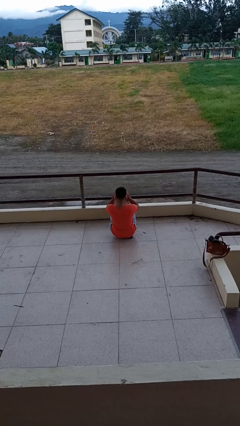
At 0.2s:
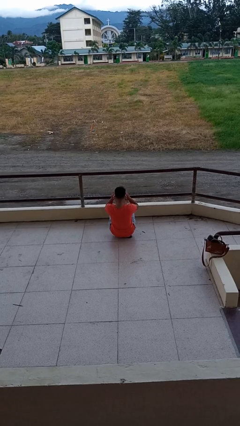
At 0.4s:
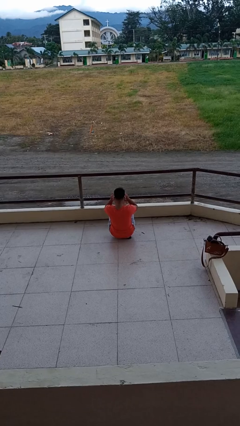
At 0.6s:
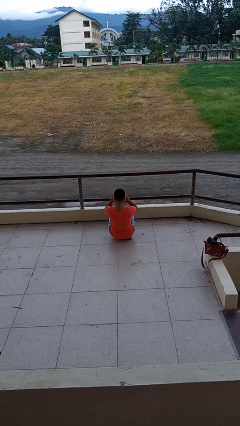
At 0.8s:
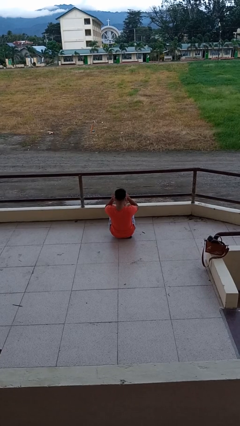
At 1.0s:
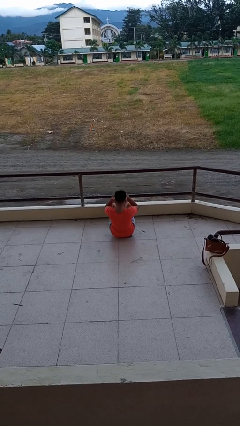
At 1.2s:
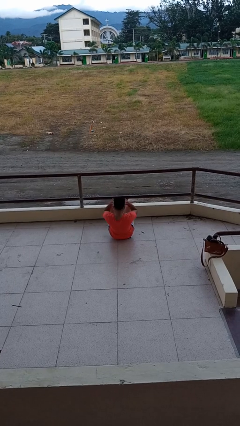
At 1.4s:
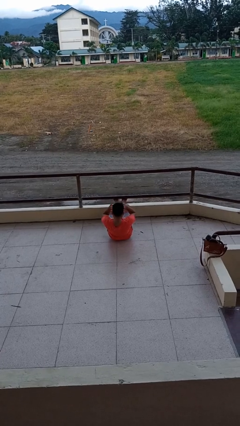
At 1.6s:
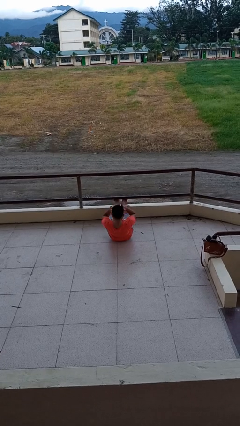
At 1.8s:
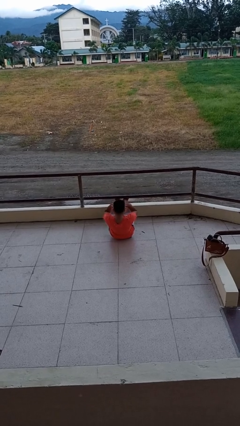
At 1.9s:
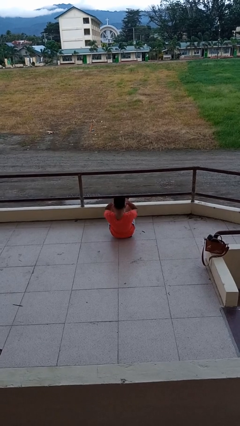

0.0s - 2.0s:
person exercises with situp

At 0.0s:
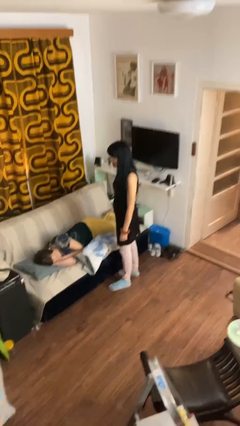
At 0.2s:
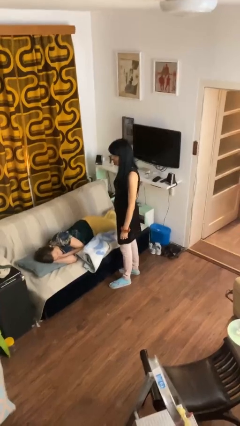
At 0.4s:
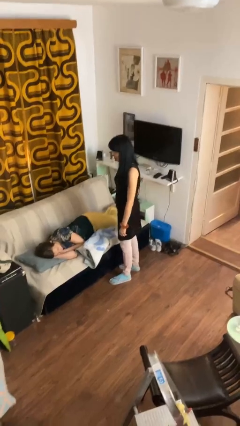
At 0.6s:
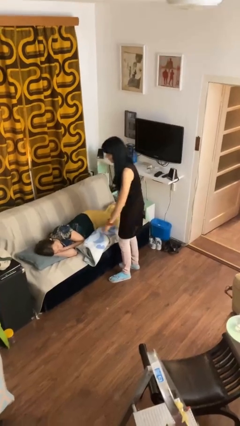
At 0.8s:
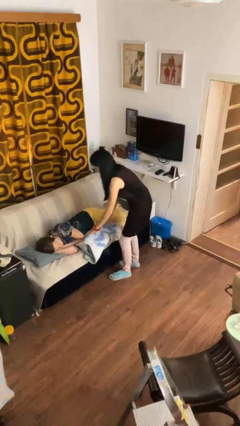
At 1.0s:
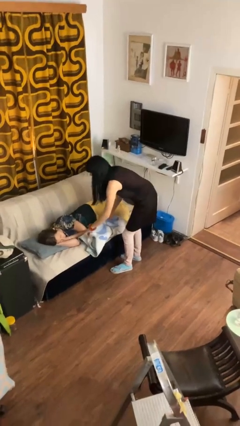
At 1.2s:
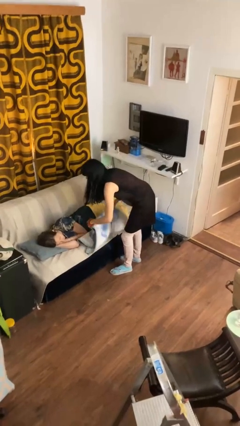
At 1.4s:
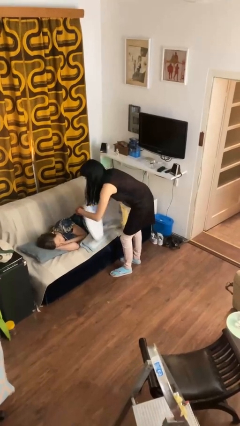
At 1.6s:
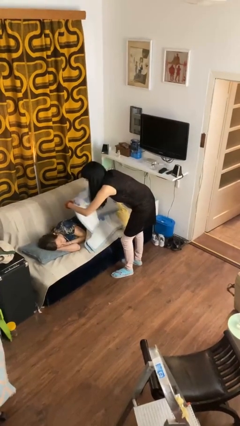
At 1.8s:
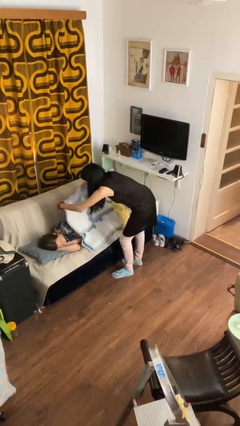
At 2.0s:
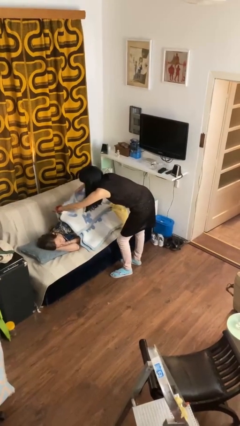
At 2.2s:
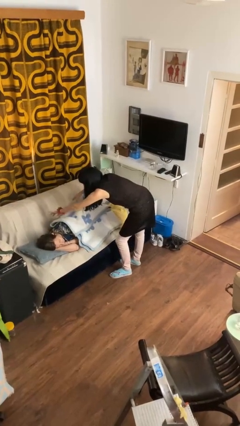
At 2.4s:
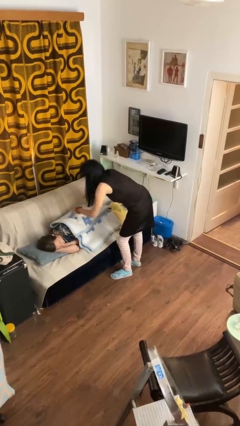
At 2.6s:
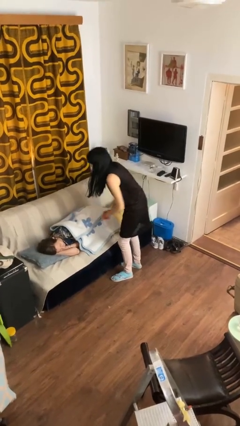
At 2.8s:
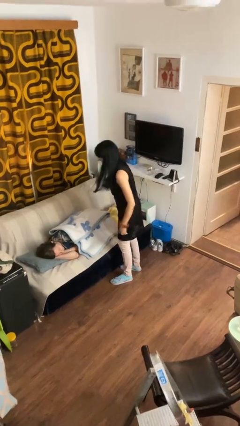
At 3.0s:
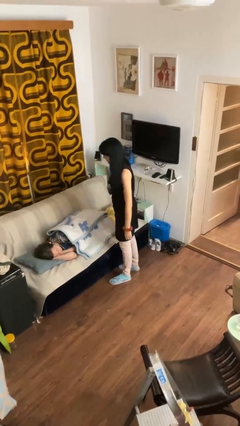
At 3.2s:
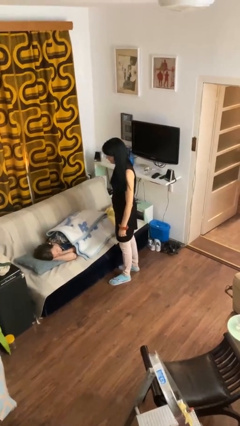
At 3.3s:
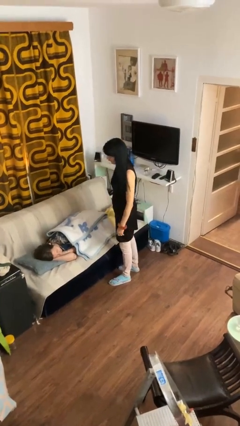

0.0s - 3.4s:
person covers friend with blanket

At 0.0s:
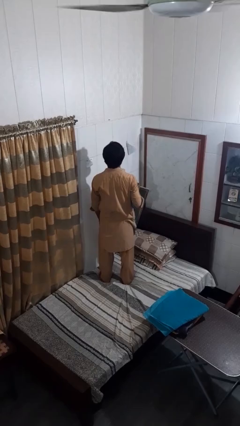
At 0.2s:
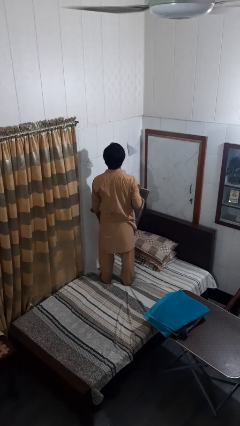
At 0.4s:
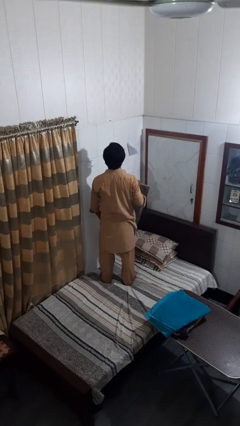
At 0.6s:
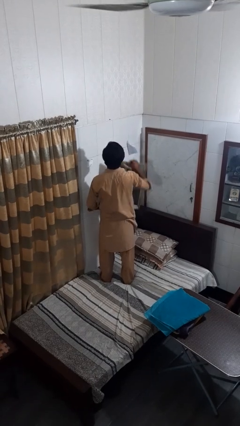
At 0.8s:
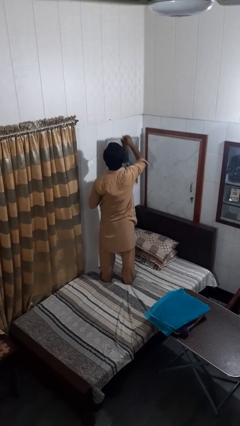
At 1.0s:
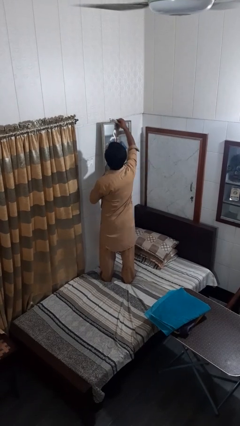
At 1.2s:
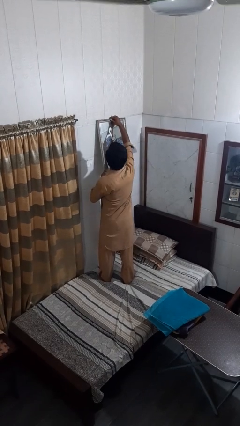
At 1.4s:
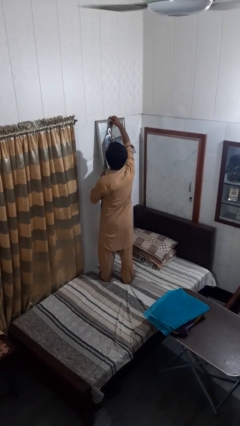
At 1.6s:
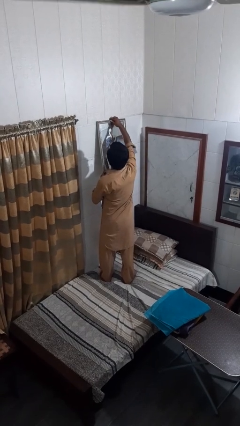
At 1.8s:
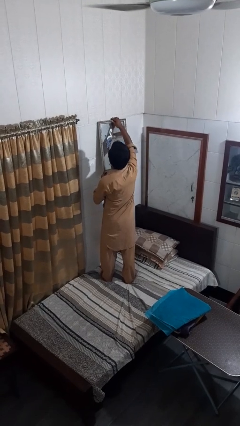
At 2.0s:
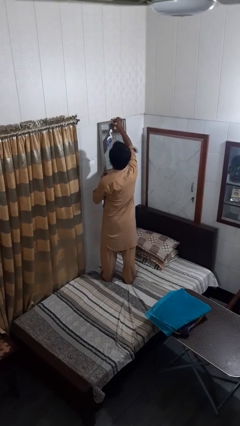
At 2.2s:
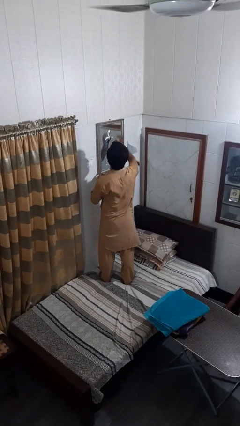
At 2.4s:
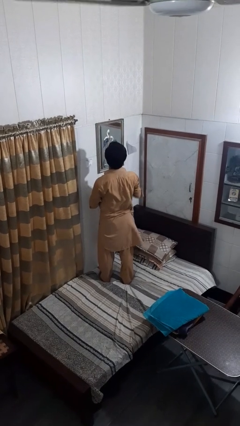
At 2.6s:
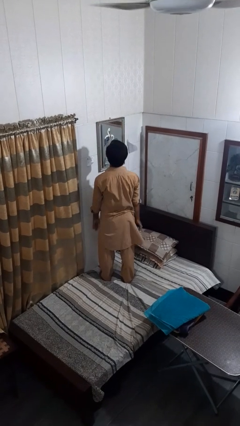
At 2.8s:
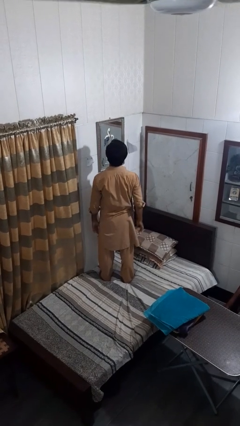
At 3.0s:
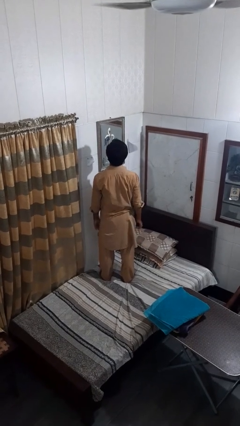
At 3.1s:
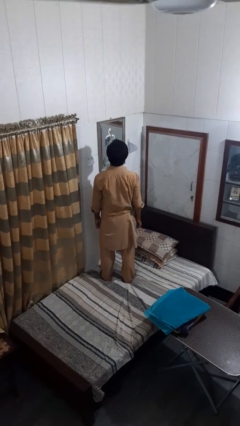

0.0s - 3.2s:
person puts up picture frame

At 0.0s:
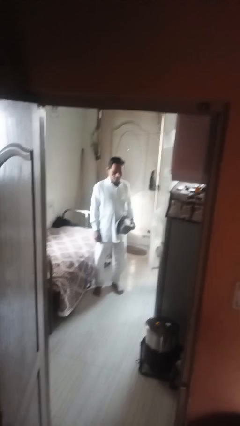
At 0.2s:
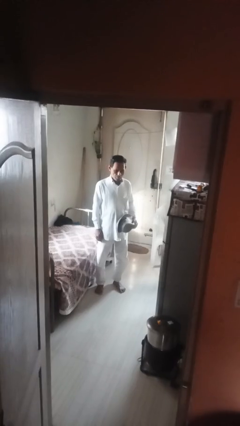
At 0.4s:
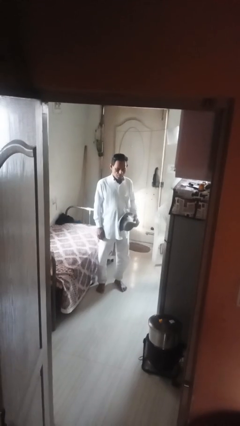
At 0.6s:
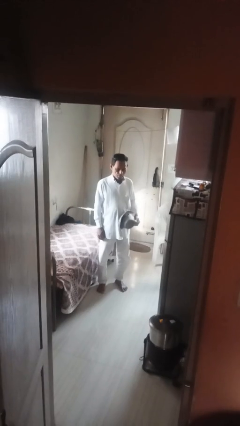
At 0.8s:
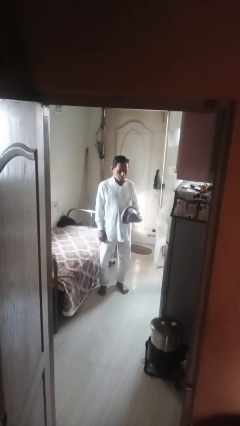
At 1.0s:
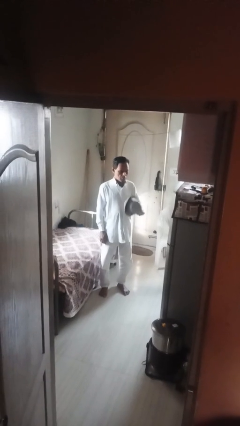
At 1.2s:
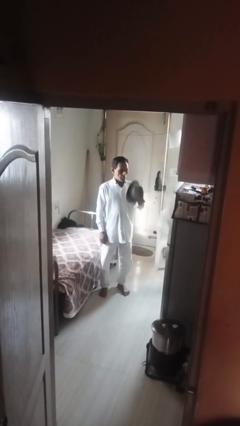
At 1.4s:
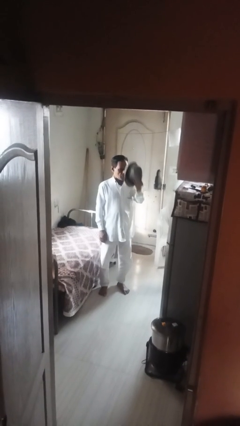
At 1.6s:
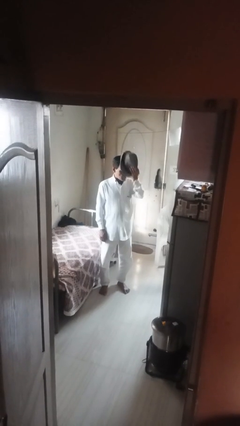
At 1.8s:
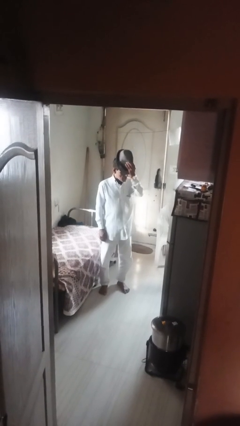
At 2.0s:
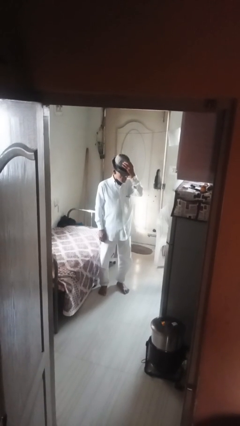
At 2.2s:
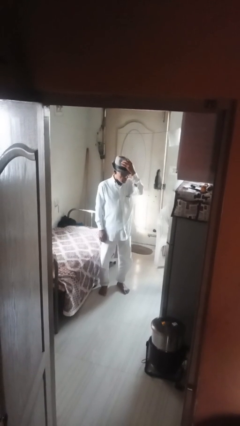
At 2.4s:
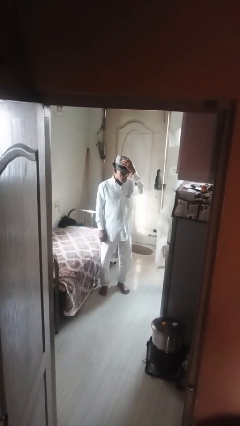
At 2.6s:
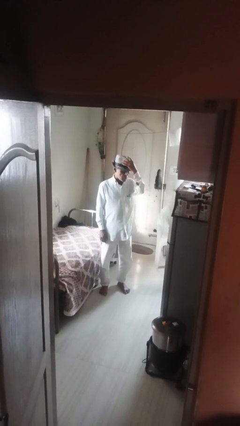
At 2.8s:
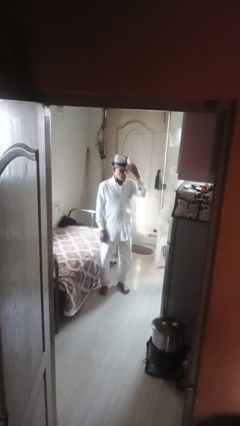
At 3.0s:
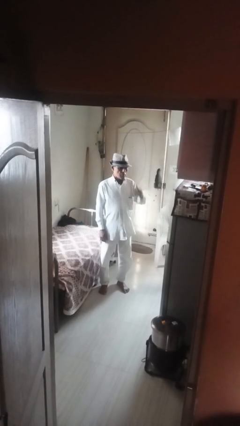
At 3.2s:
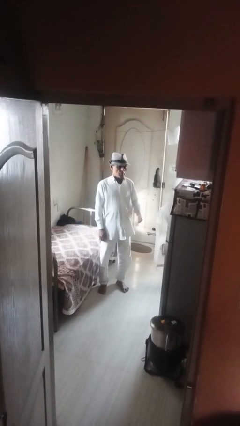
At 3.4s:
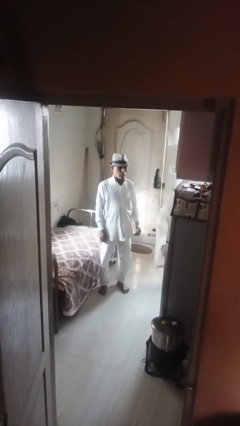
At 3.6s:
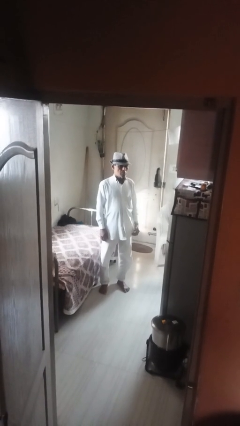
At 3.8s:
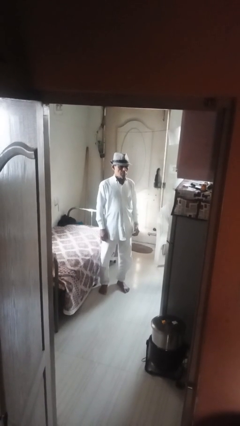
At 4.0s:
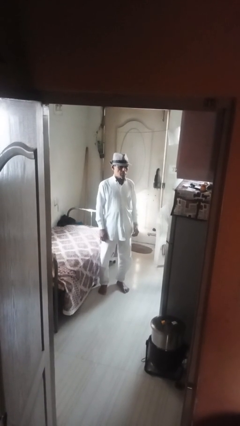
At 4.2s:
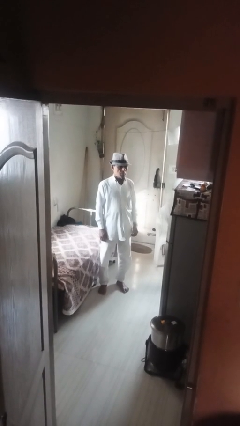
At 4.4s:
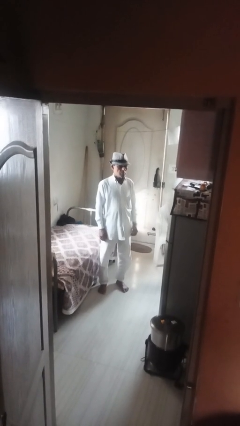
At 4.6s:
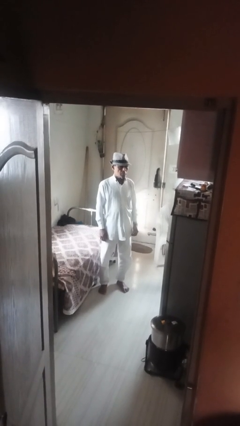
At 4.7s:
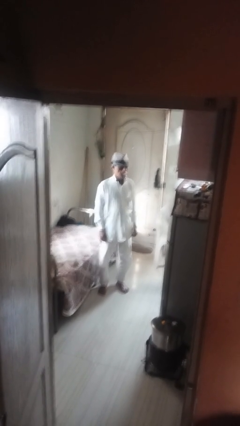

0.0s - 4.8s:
person puts on hat

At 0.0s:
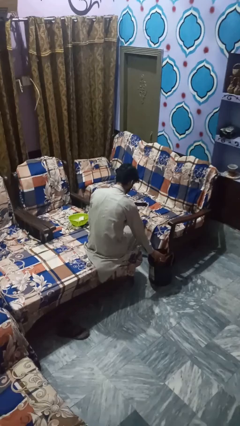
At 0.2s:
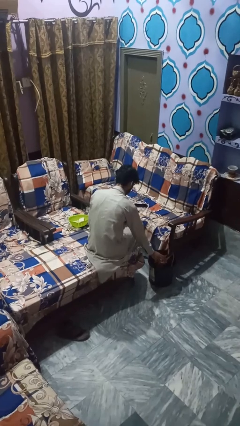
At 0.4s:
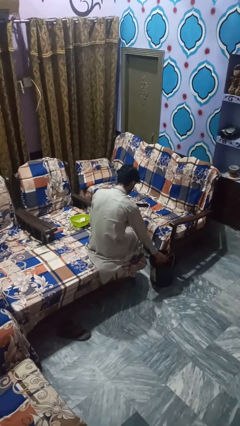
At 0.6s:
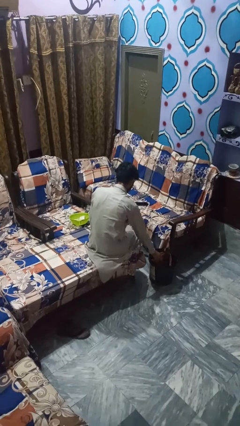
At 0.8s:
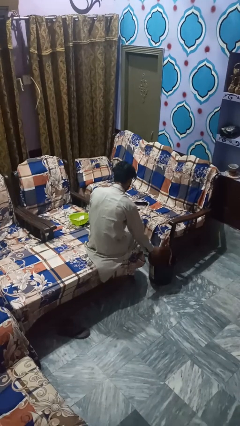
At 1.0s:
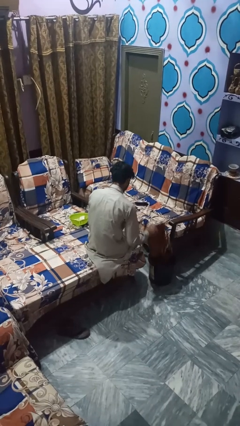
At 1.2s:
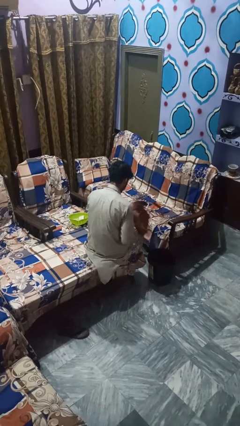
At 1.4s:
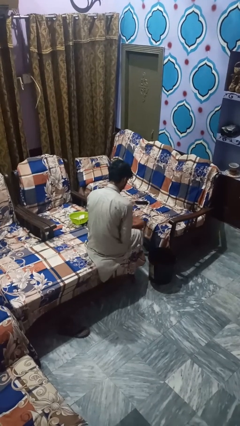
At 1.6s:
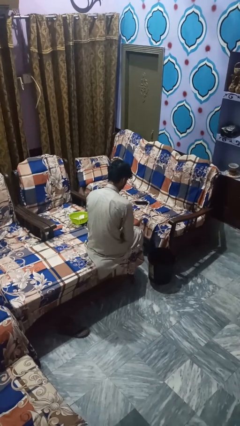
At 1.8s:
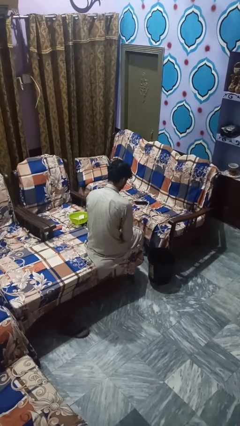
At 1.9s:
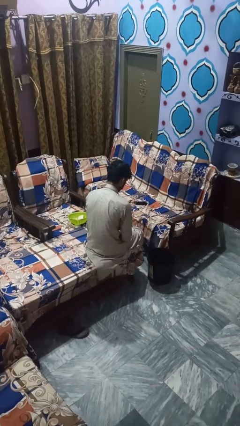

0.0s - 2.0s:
person takes object from basket

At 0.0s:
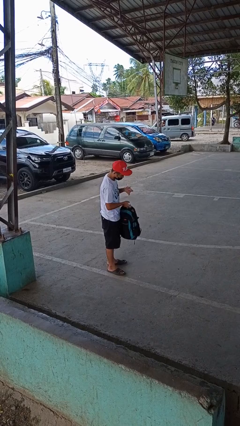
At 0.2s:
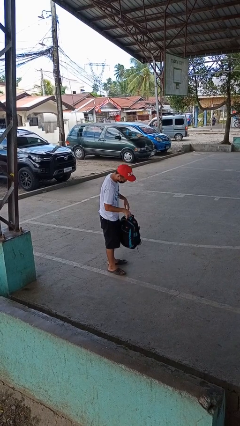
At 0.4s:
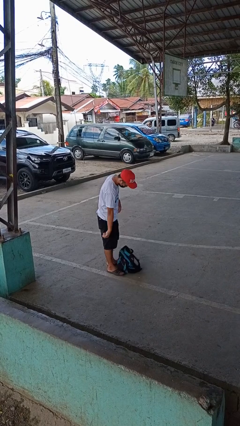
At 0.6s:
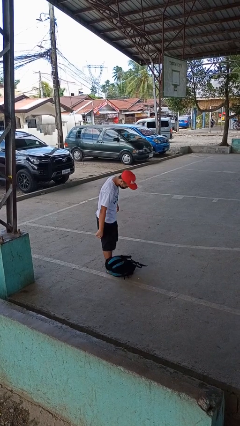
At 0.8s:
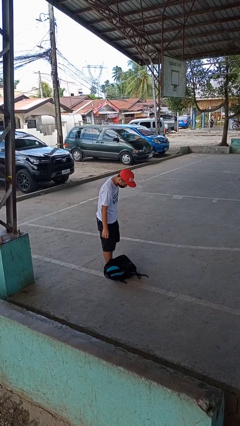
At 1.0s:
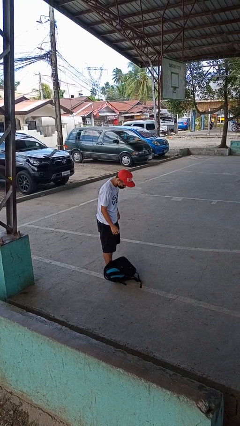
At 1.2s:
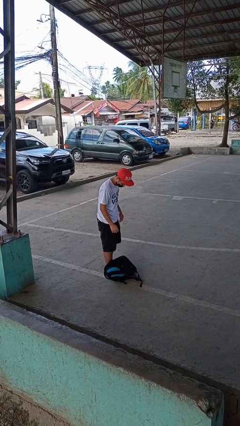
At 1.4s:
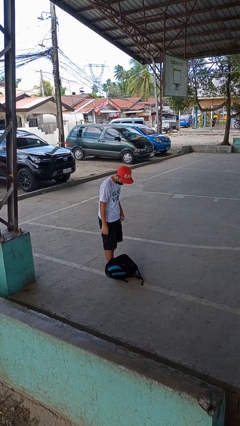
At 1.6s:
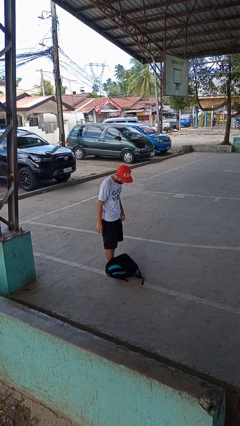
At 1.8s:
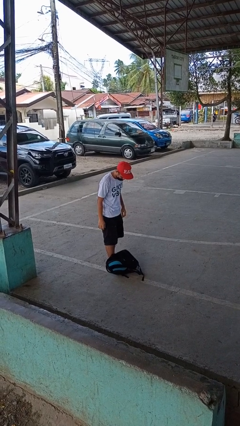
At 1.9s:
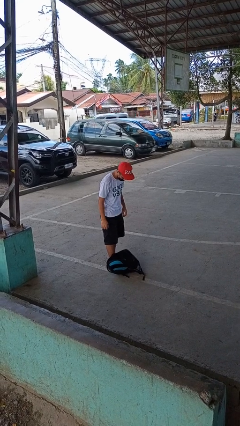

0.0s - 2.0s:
person drops object

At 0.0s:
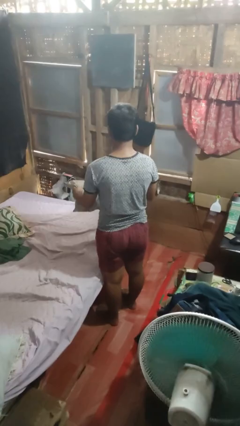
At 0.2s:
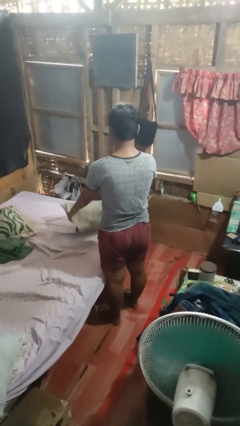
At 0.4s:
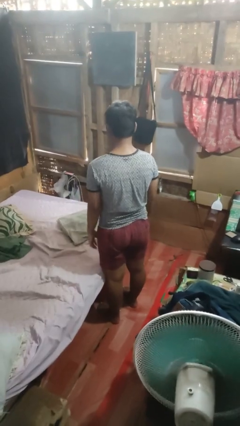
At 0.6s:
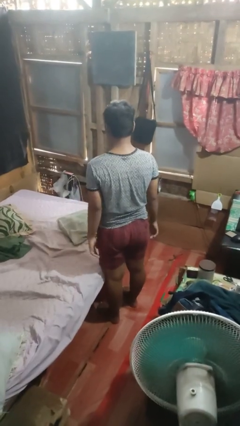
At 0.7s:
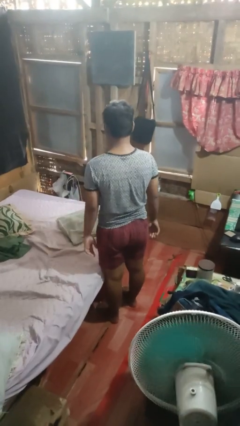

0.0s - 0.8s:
person puts down object on bed
